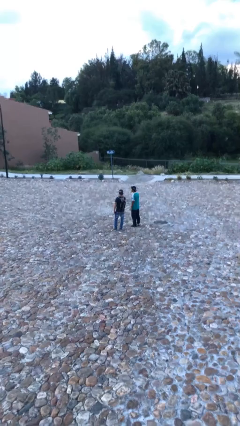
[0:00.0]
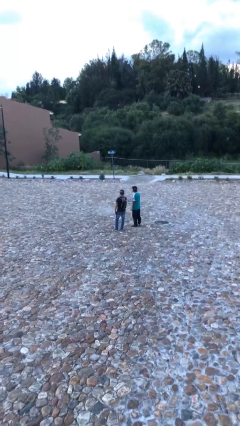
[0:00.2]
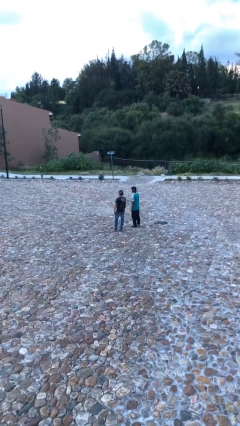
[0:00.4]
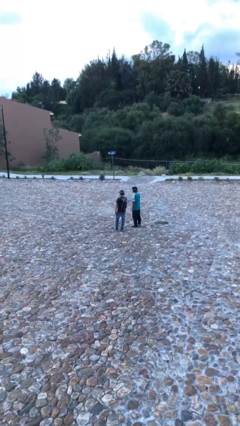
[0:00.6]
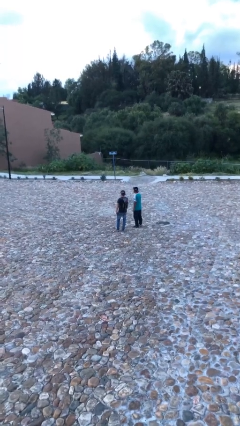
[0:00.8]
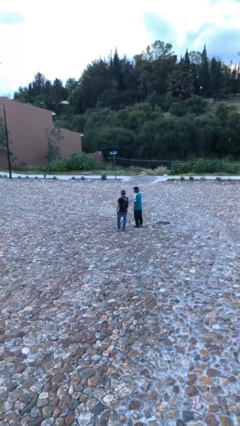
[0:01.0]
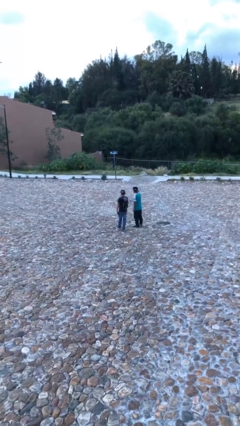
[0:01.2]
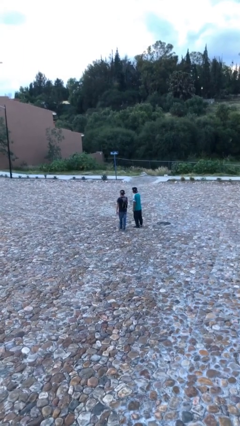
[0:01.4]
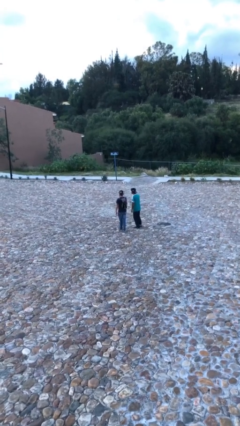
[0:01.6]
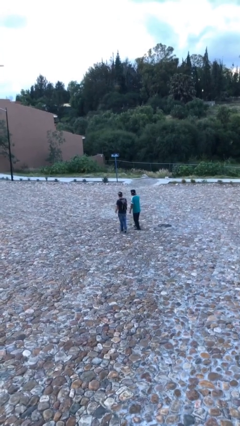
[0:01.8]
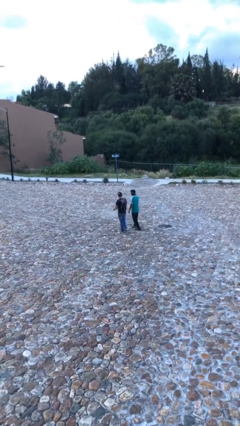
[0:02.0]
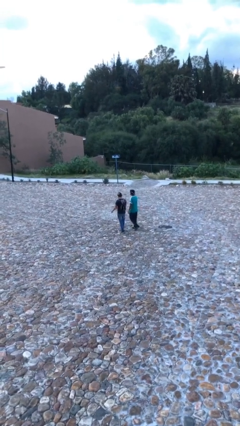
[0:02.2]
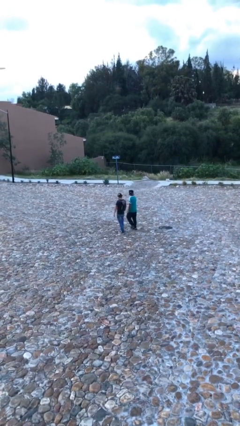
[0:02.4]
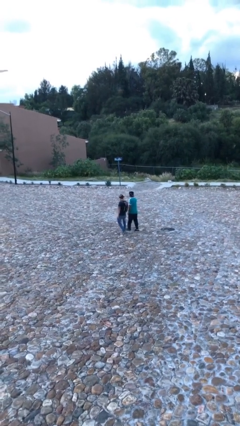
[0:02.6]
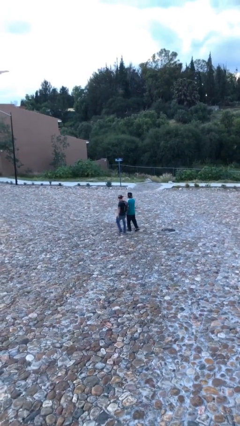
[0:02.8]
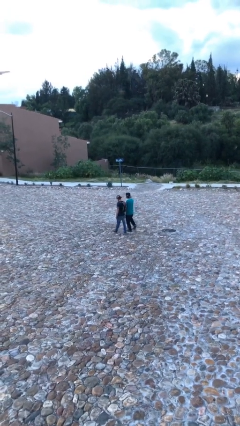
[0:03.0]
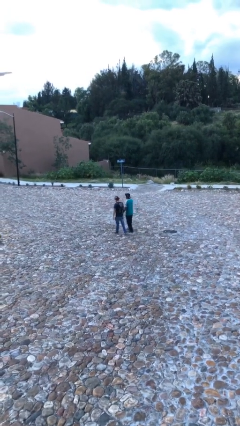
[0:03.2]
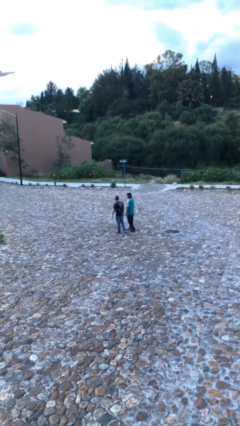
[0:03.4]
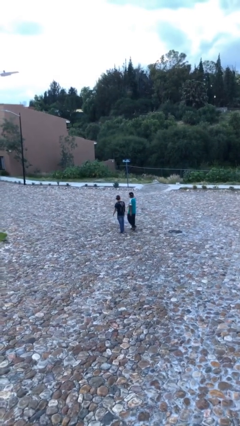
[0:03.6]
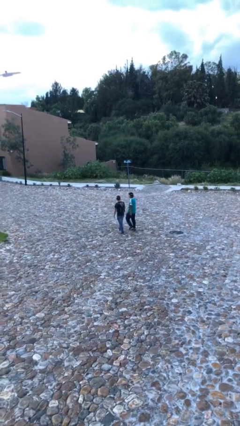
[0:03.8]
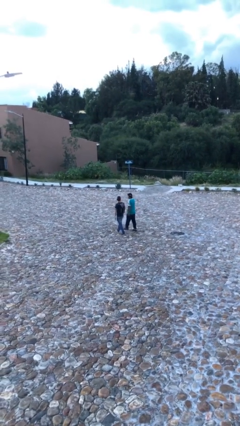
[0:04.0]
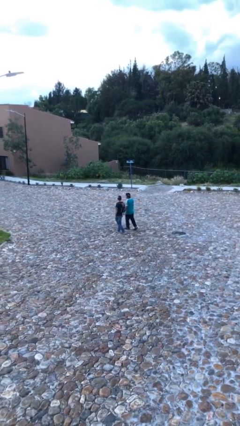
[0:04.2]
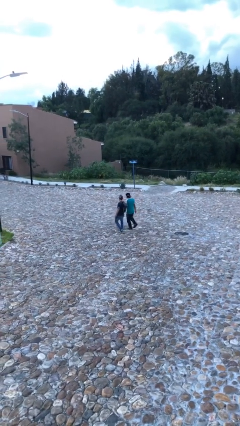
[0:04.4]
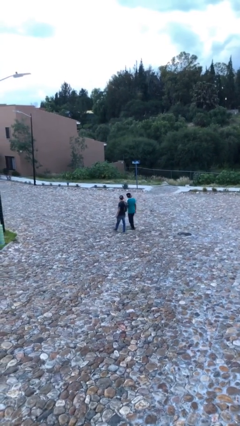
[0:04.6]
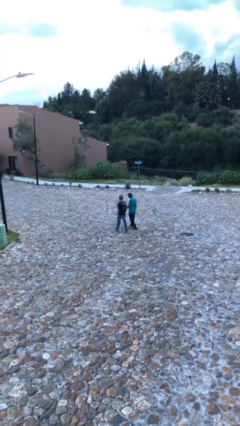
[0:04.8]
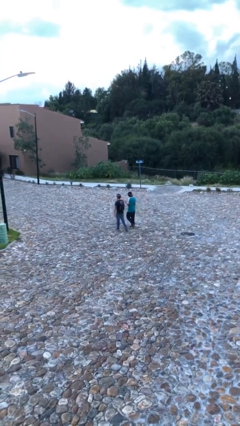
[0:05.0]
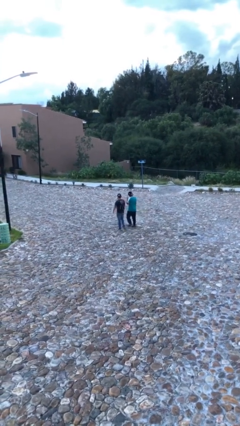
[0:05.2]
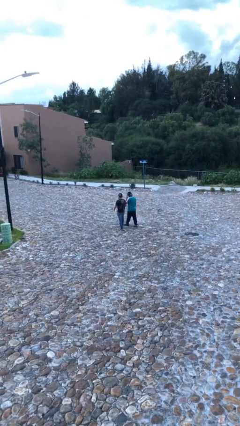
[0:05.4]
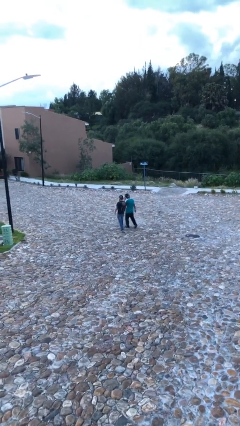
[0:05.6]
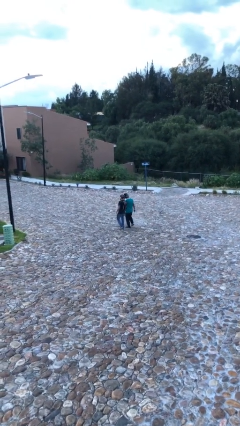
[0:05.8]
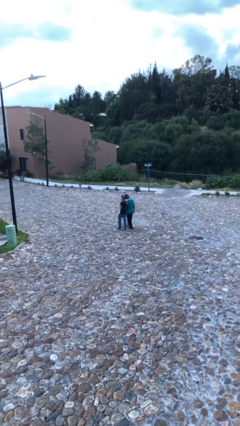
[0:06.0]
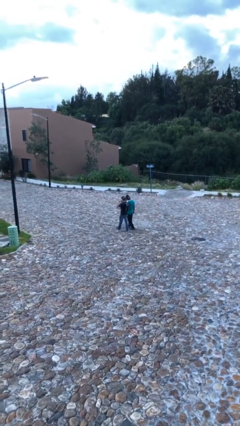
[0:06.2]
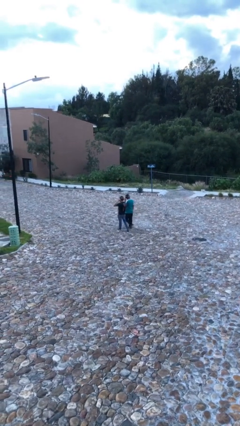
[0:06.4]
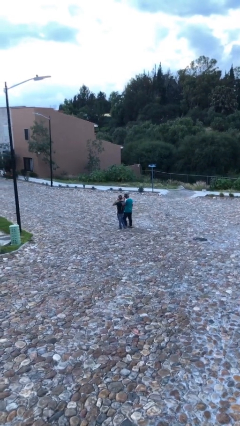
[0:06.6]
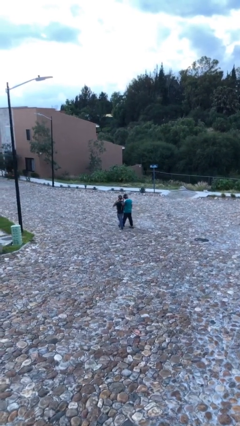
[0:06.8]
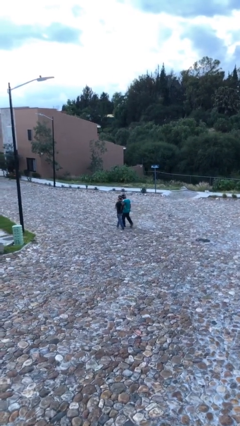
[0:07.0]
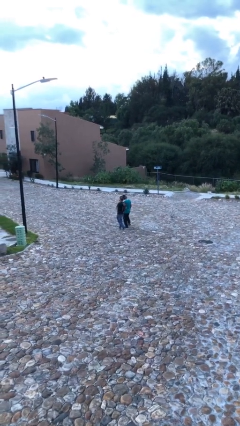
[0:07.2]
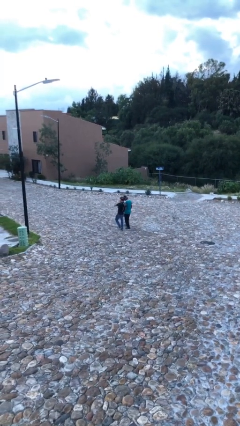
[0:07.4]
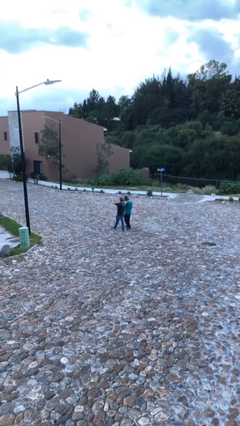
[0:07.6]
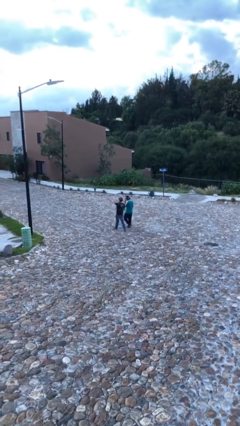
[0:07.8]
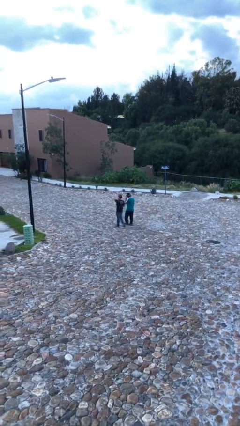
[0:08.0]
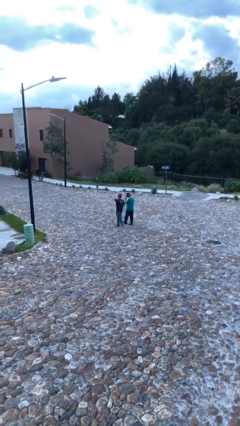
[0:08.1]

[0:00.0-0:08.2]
person talks to person

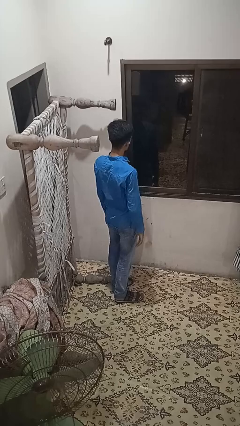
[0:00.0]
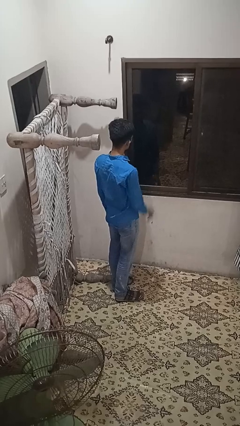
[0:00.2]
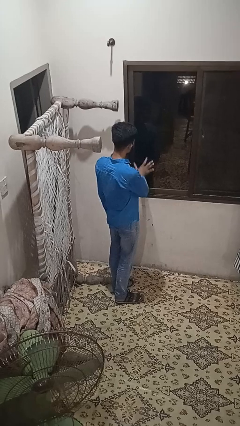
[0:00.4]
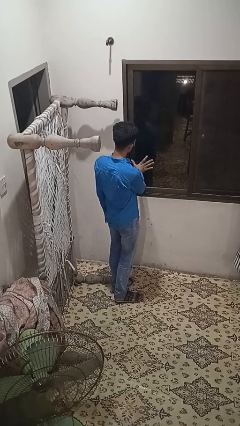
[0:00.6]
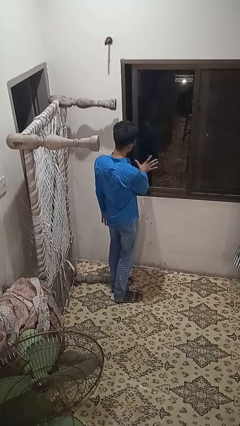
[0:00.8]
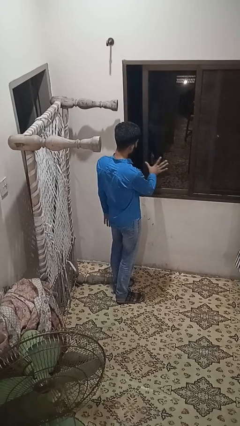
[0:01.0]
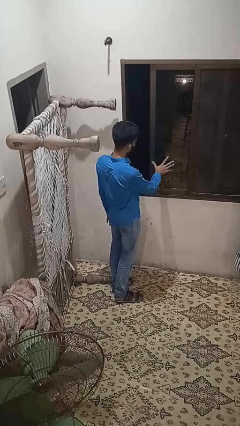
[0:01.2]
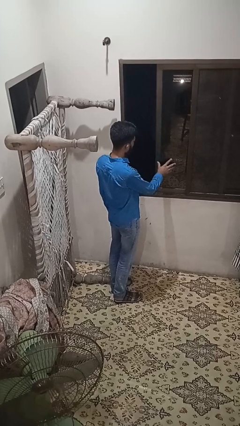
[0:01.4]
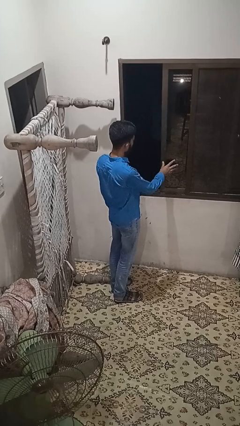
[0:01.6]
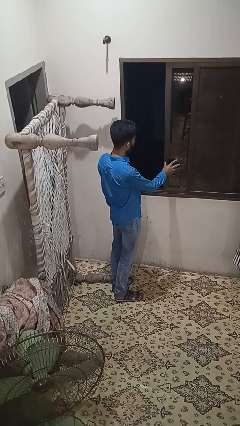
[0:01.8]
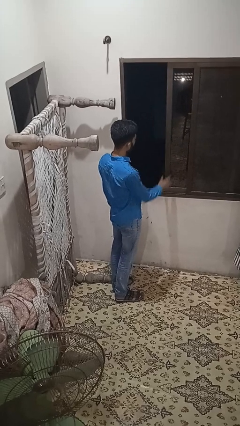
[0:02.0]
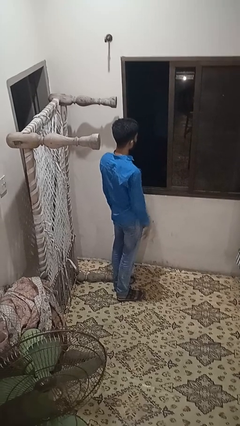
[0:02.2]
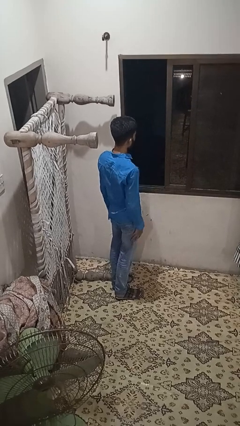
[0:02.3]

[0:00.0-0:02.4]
person opens home window

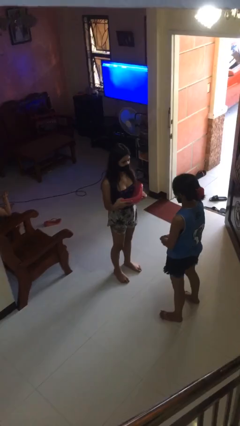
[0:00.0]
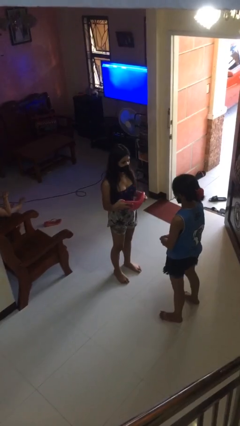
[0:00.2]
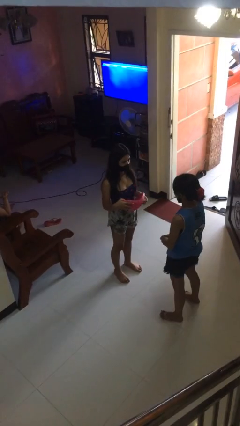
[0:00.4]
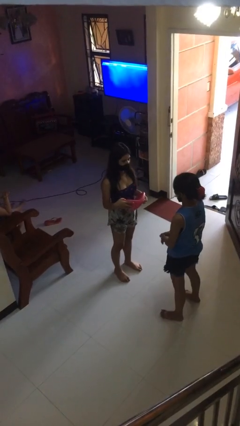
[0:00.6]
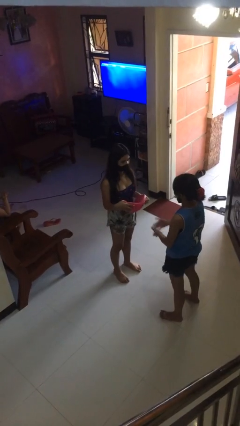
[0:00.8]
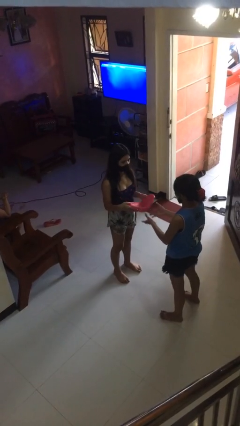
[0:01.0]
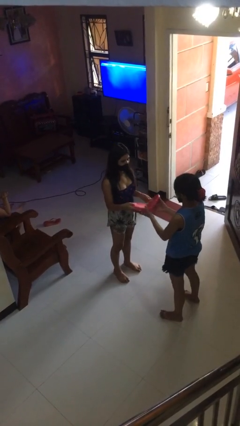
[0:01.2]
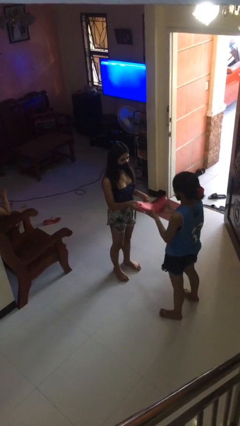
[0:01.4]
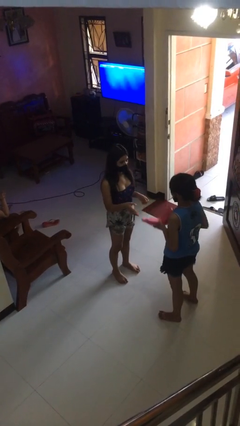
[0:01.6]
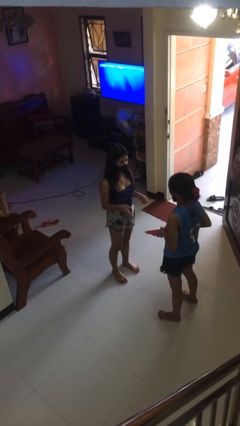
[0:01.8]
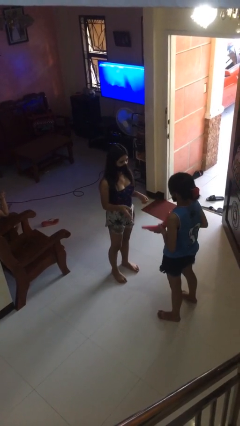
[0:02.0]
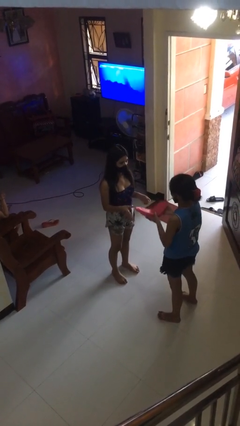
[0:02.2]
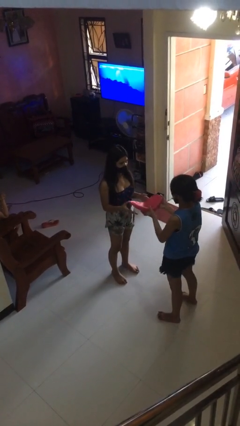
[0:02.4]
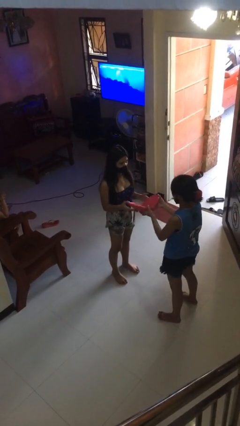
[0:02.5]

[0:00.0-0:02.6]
person transfers object to person

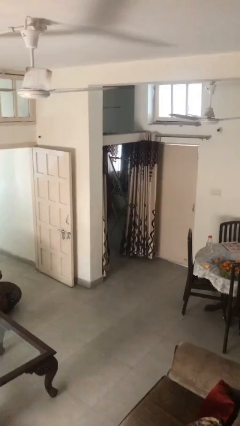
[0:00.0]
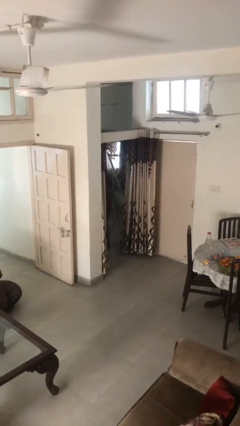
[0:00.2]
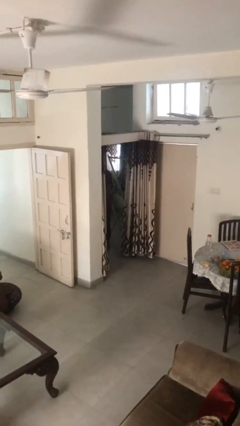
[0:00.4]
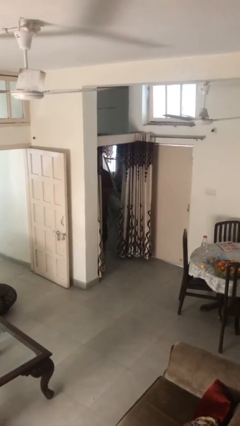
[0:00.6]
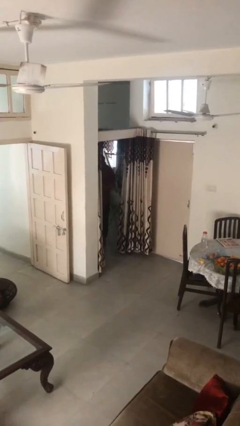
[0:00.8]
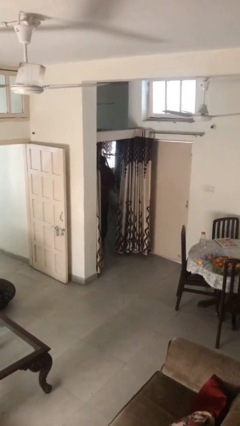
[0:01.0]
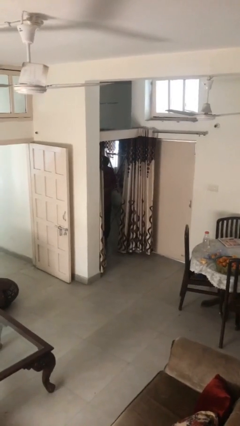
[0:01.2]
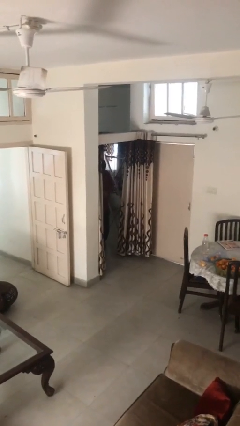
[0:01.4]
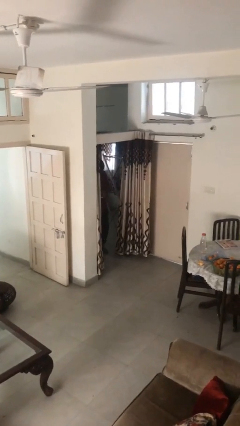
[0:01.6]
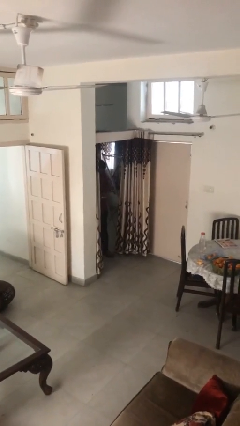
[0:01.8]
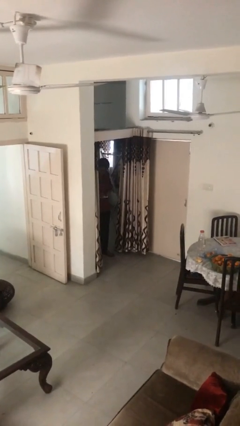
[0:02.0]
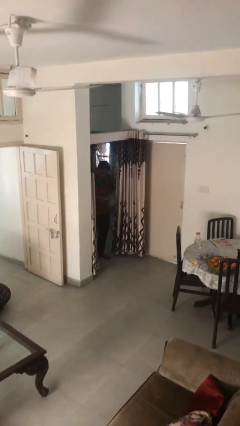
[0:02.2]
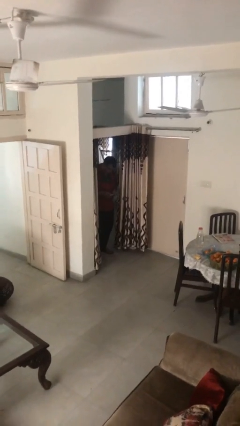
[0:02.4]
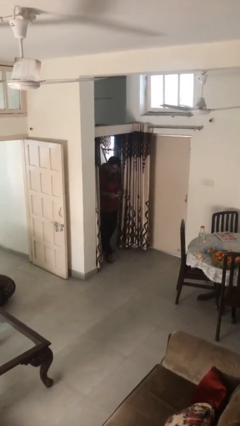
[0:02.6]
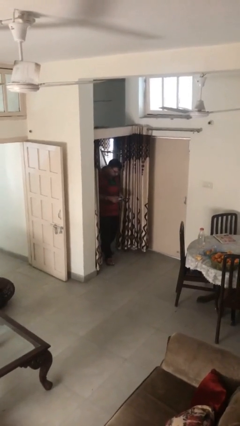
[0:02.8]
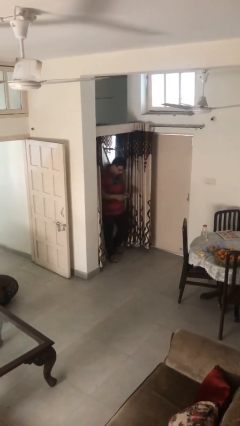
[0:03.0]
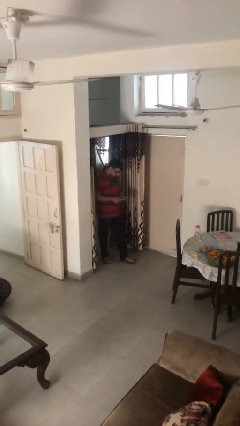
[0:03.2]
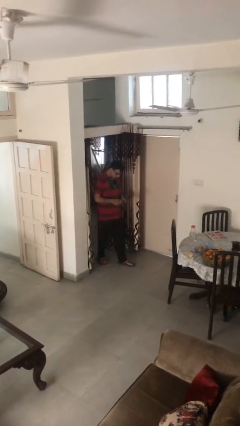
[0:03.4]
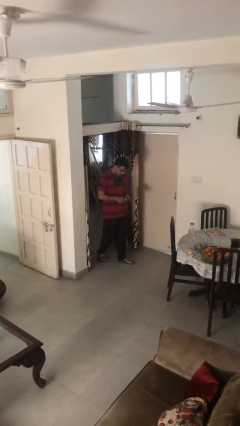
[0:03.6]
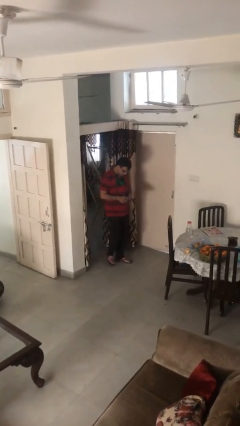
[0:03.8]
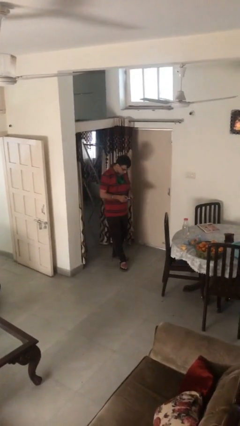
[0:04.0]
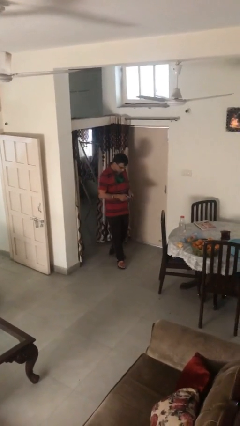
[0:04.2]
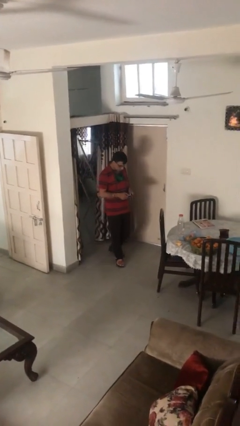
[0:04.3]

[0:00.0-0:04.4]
person enters scene through structure
